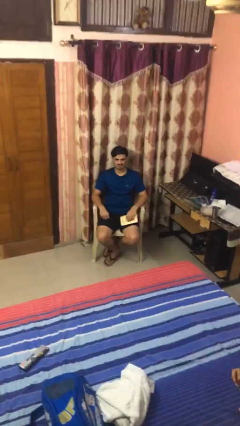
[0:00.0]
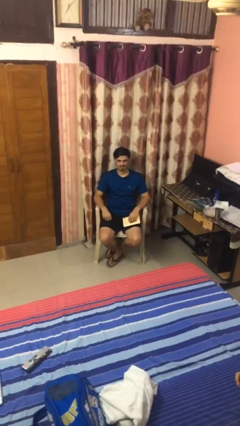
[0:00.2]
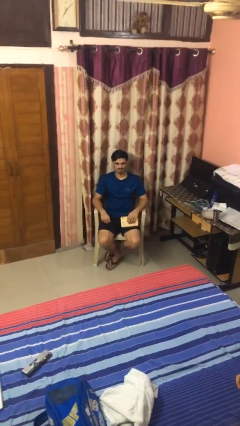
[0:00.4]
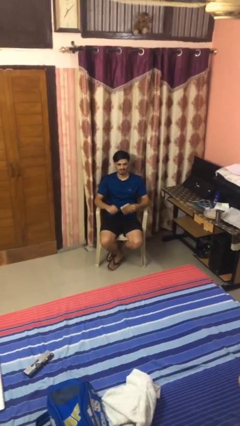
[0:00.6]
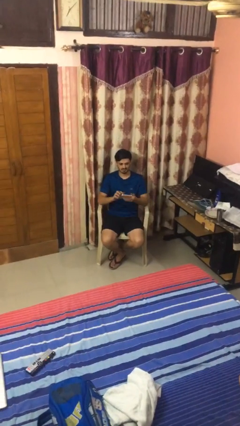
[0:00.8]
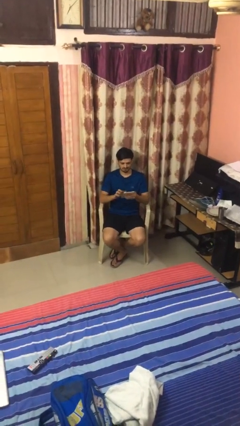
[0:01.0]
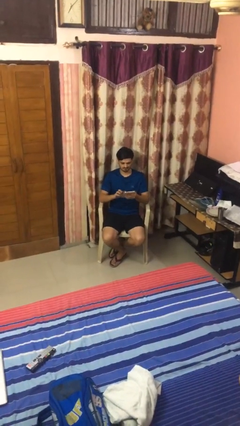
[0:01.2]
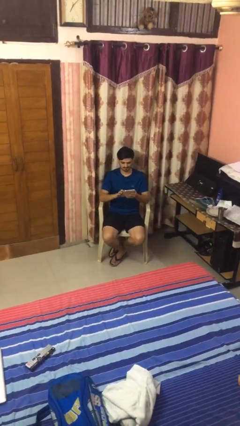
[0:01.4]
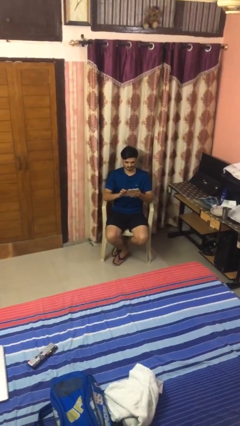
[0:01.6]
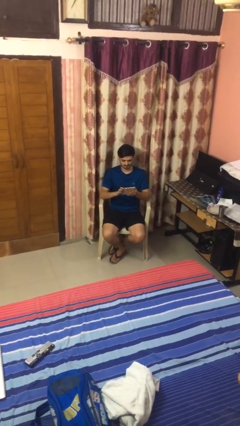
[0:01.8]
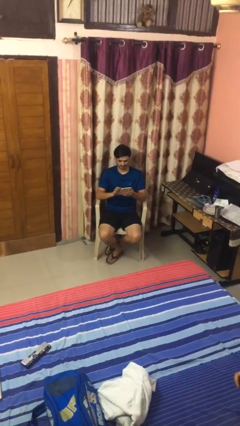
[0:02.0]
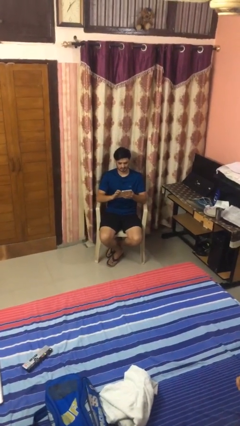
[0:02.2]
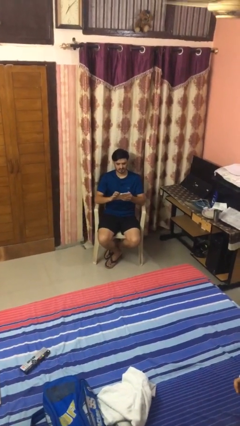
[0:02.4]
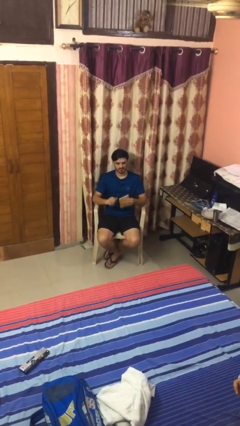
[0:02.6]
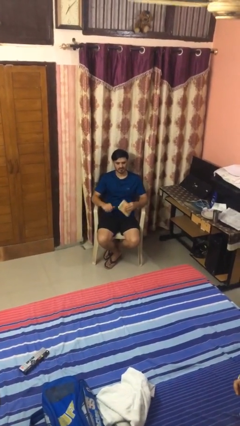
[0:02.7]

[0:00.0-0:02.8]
person interacts with tablet

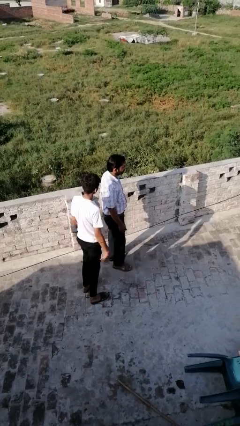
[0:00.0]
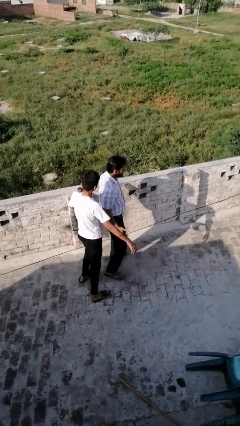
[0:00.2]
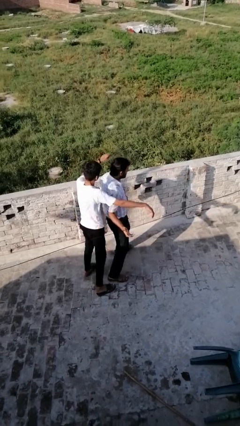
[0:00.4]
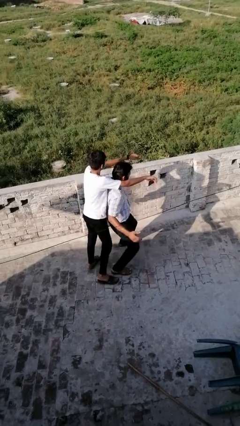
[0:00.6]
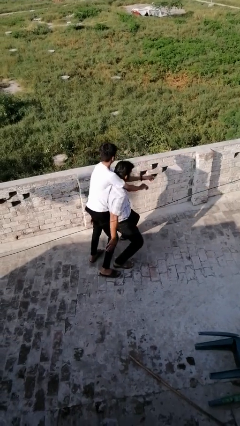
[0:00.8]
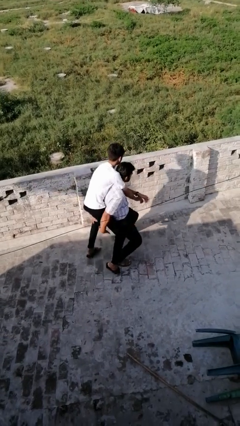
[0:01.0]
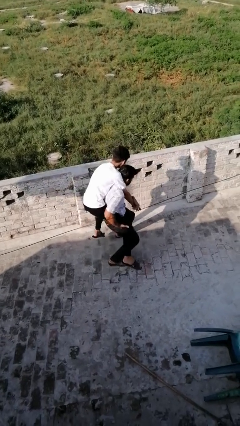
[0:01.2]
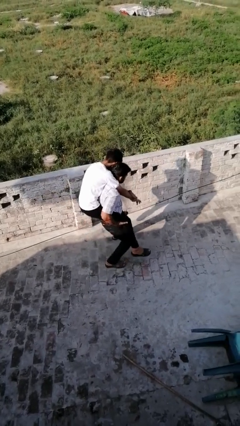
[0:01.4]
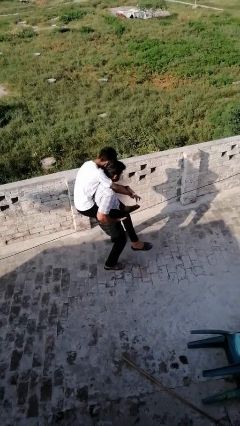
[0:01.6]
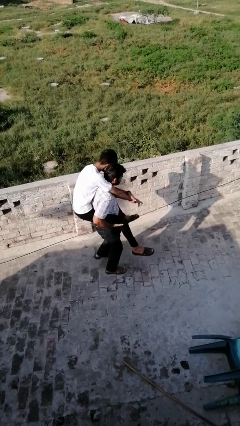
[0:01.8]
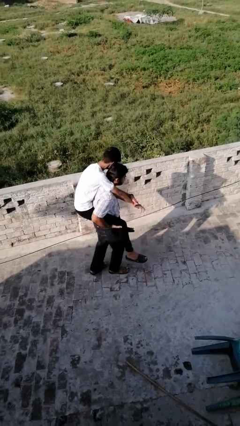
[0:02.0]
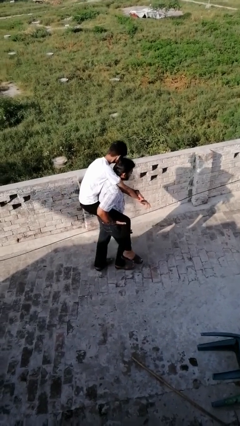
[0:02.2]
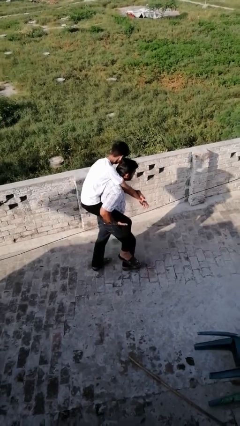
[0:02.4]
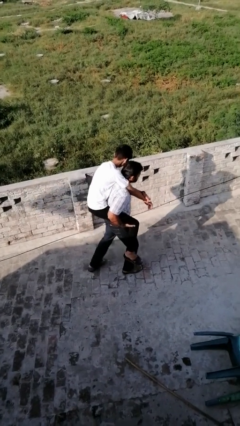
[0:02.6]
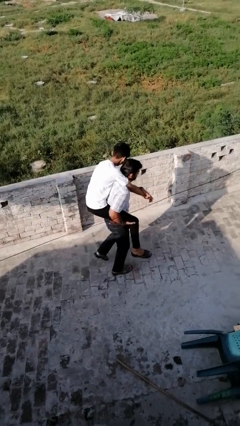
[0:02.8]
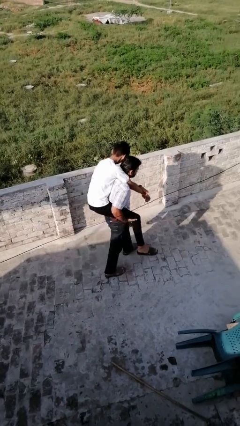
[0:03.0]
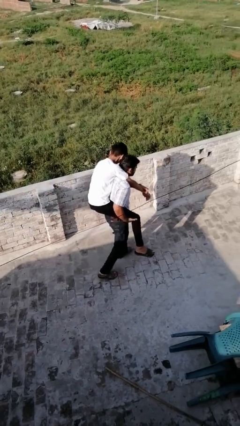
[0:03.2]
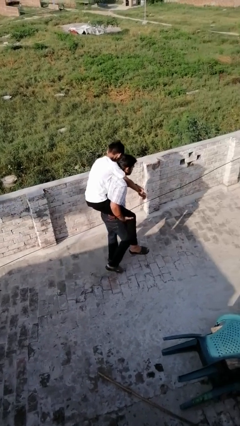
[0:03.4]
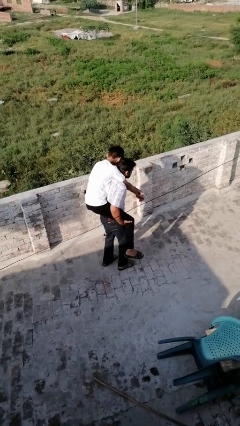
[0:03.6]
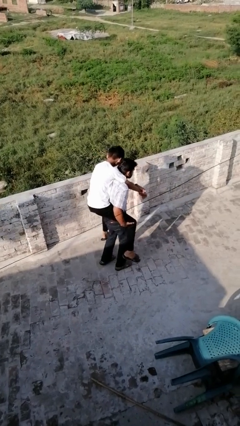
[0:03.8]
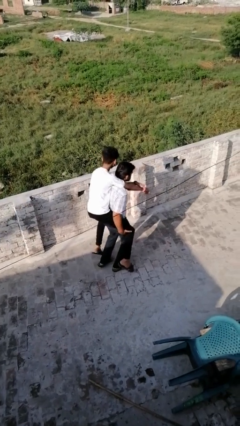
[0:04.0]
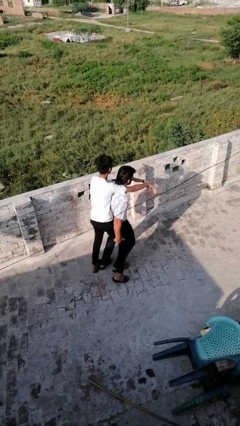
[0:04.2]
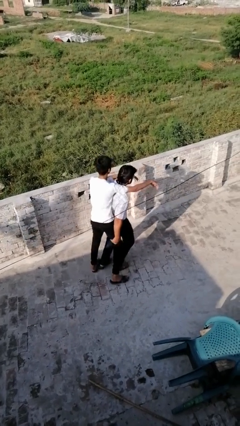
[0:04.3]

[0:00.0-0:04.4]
person carries person on back

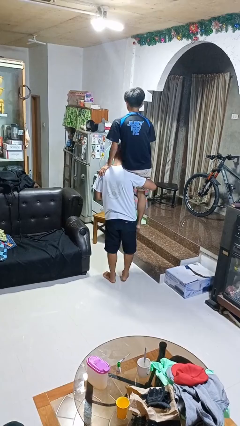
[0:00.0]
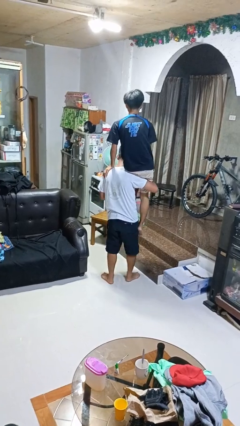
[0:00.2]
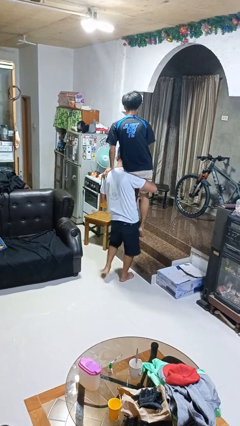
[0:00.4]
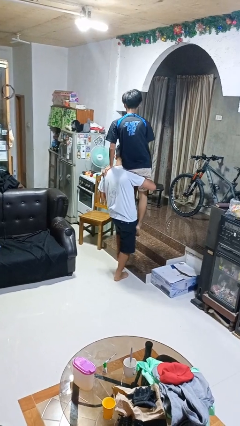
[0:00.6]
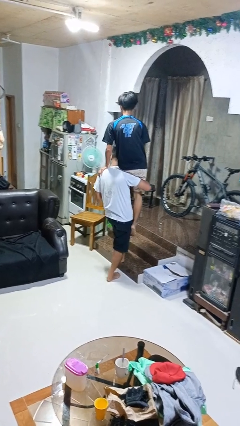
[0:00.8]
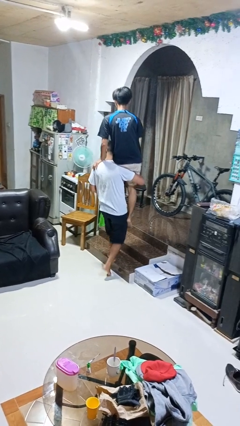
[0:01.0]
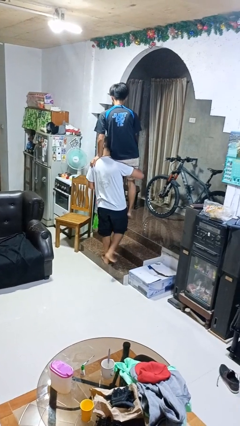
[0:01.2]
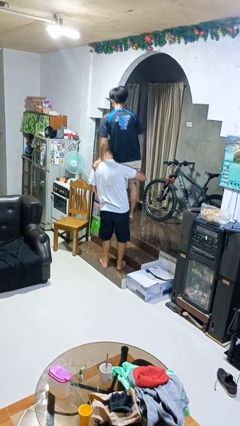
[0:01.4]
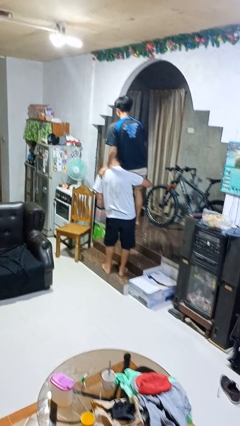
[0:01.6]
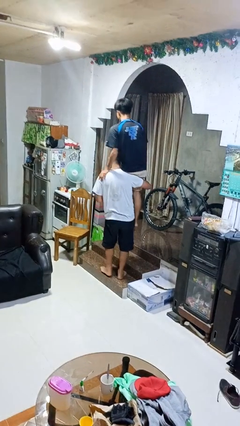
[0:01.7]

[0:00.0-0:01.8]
person carries person on shoulders

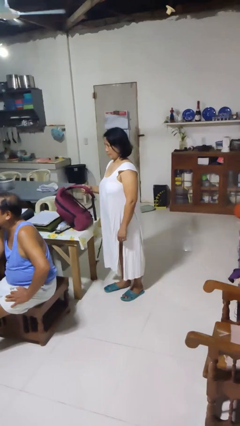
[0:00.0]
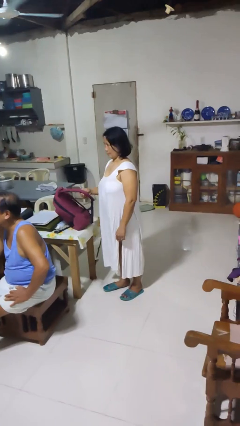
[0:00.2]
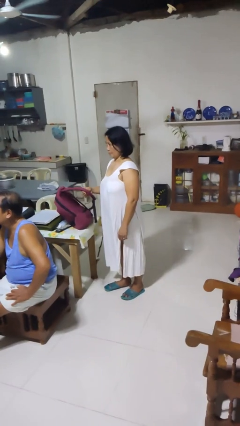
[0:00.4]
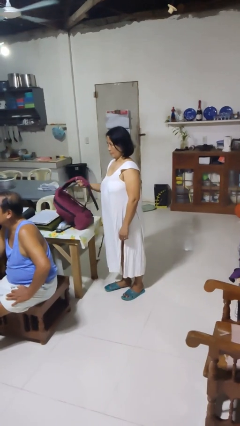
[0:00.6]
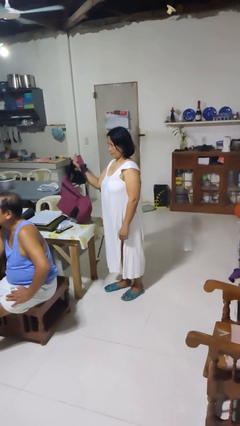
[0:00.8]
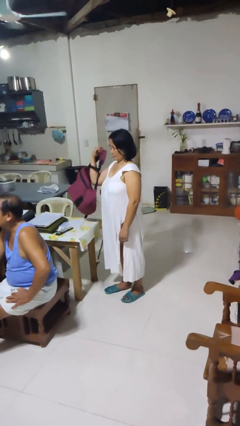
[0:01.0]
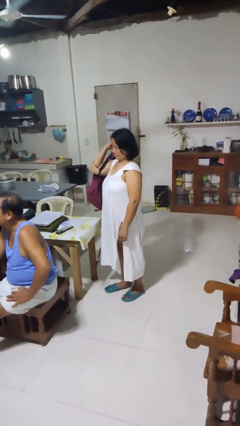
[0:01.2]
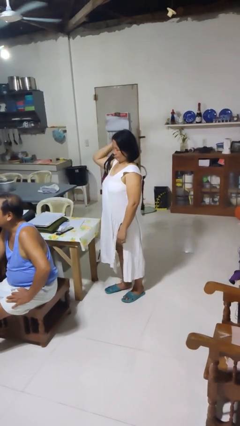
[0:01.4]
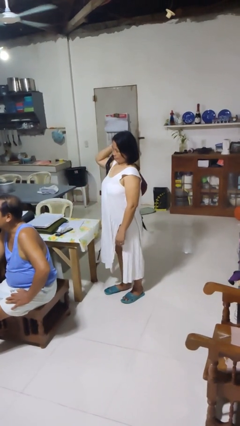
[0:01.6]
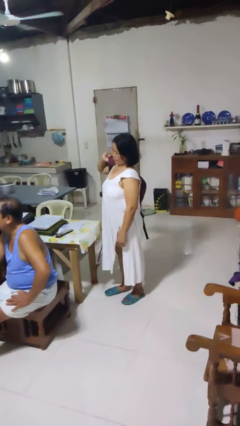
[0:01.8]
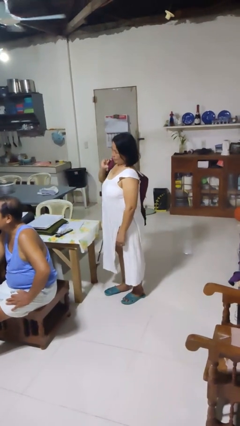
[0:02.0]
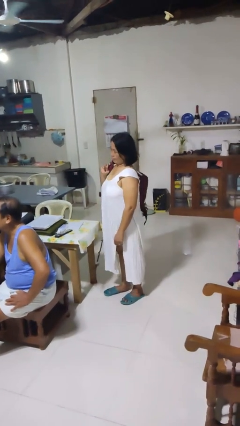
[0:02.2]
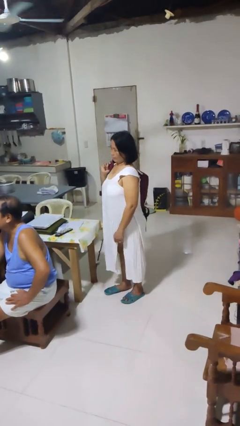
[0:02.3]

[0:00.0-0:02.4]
person puts on backpack

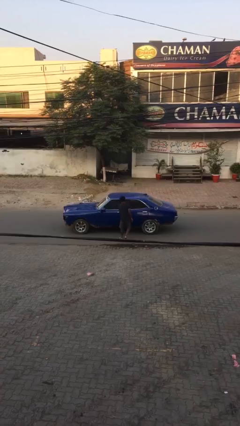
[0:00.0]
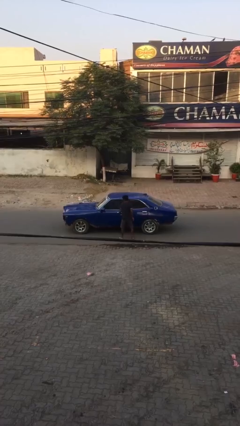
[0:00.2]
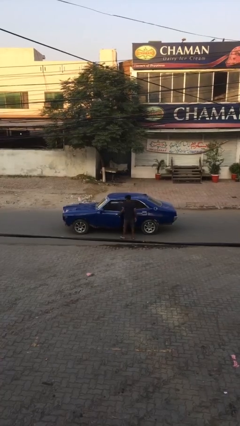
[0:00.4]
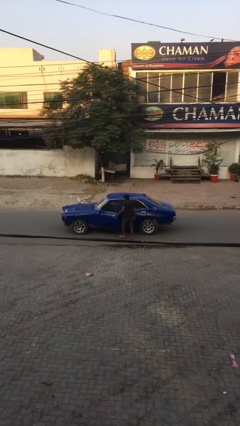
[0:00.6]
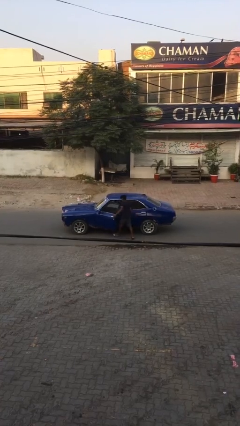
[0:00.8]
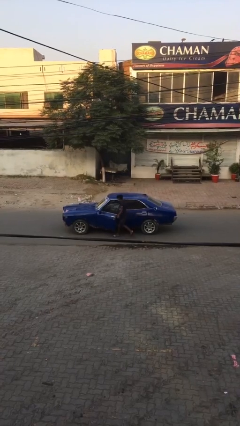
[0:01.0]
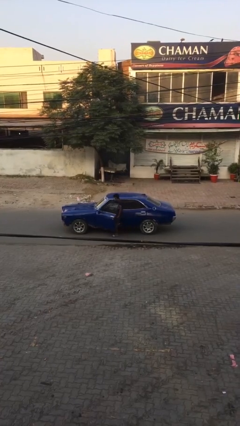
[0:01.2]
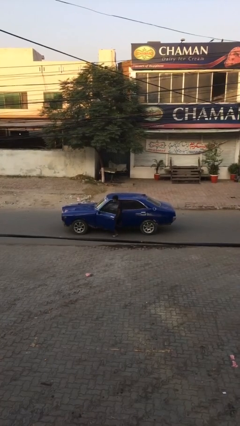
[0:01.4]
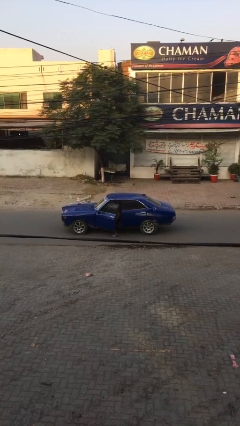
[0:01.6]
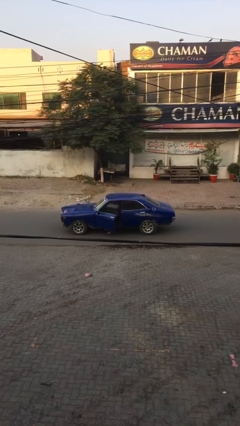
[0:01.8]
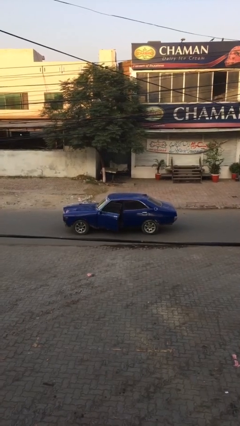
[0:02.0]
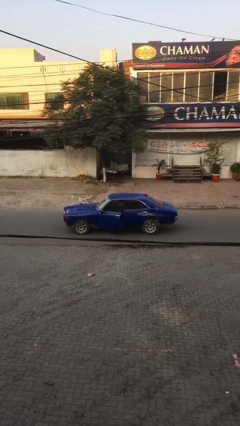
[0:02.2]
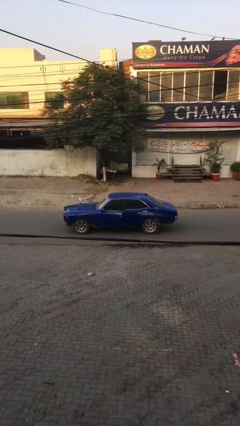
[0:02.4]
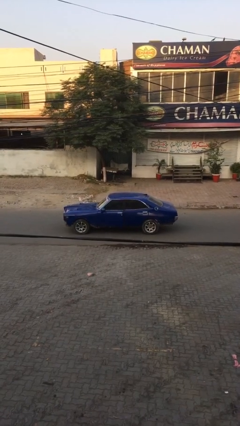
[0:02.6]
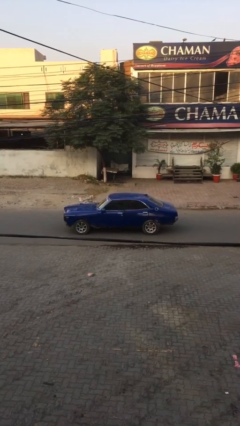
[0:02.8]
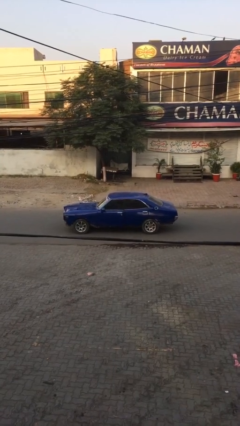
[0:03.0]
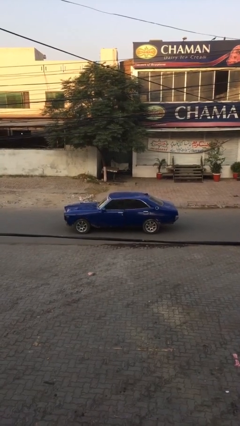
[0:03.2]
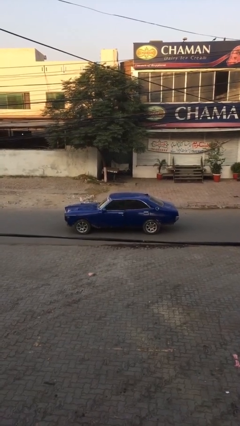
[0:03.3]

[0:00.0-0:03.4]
car picks up person

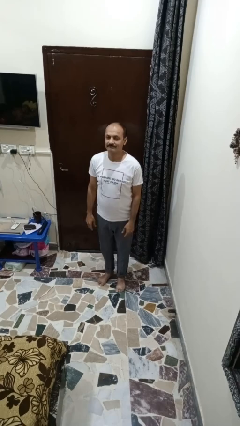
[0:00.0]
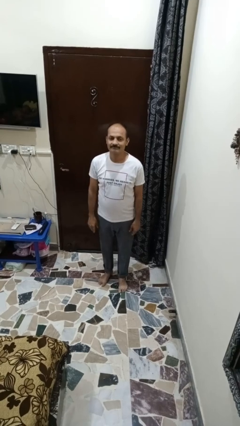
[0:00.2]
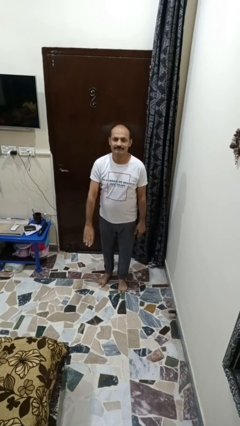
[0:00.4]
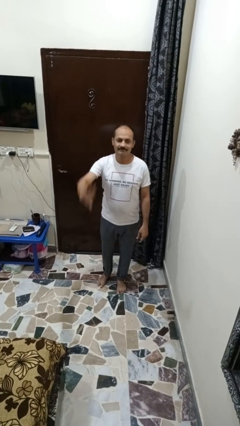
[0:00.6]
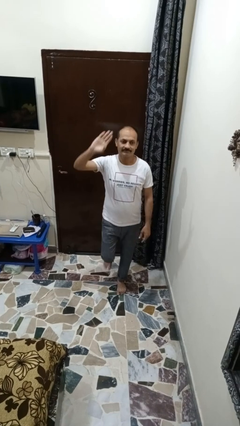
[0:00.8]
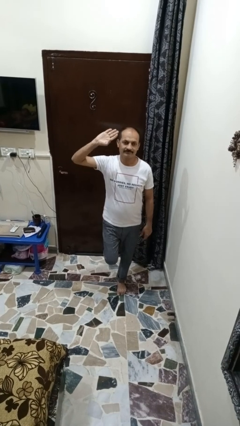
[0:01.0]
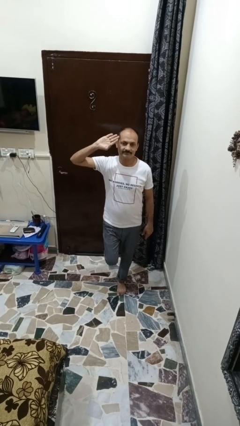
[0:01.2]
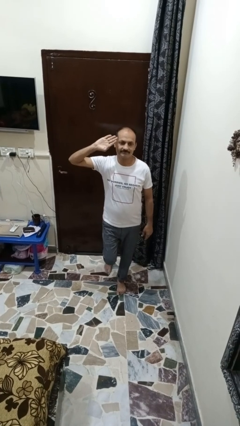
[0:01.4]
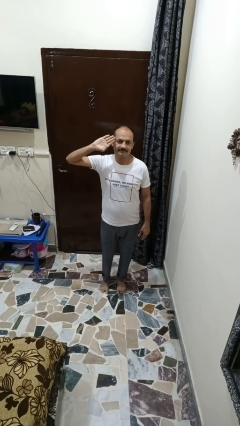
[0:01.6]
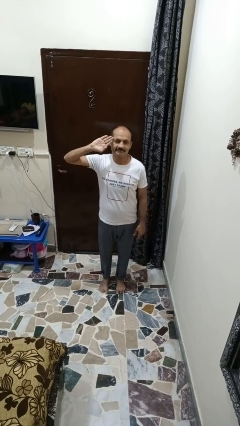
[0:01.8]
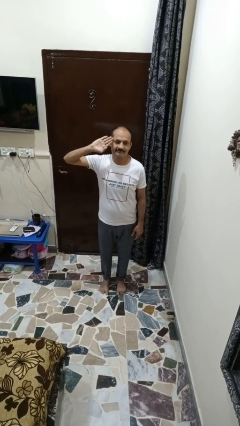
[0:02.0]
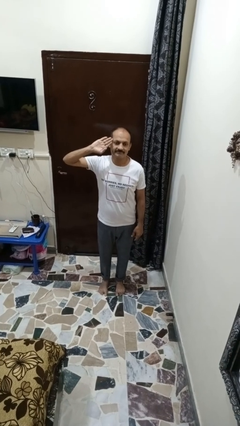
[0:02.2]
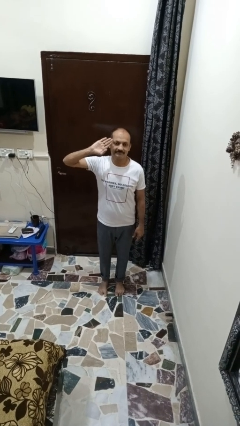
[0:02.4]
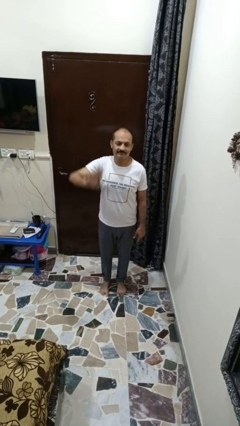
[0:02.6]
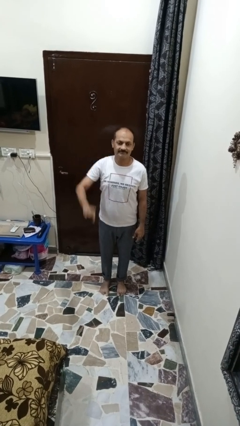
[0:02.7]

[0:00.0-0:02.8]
person salutes

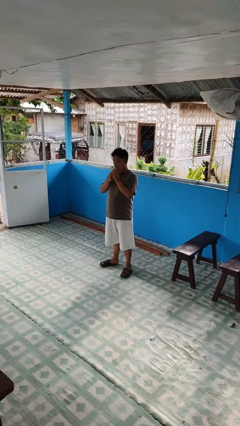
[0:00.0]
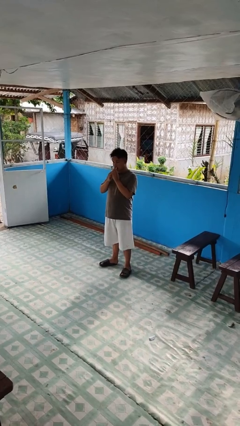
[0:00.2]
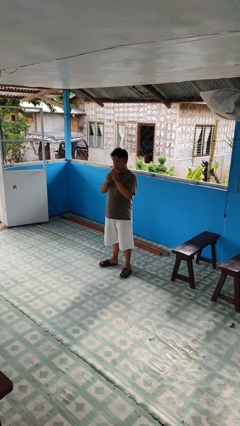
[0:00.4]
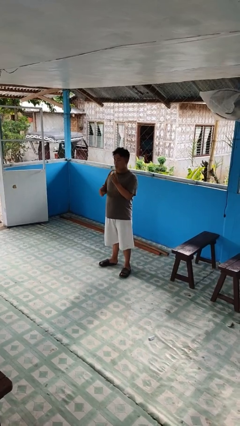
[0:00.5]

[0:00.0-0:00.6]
person eats banana
